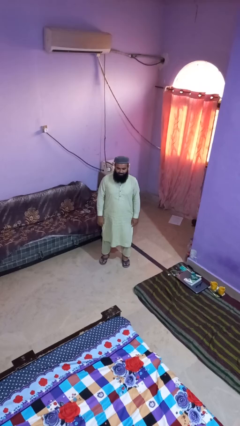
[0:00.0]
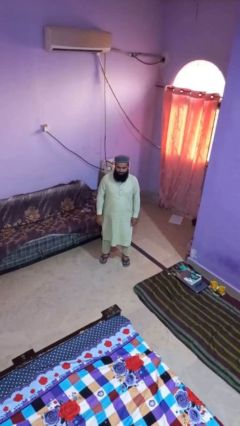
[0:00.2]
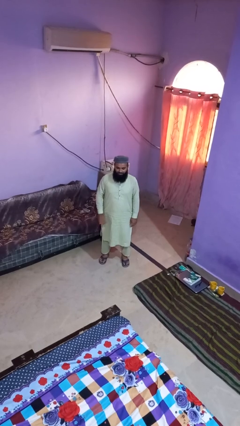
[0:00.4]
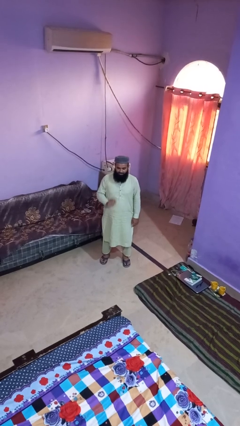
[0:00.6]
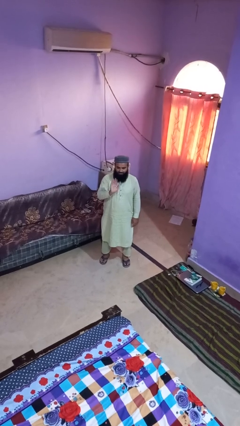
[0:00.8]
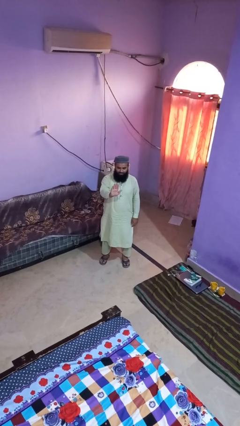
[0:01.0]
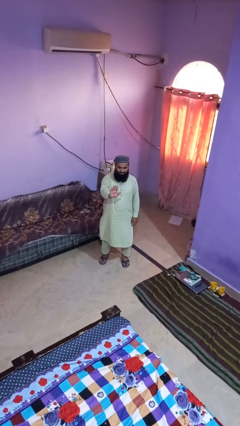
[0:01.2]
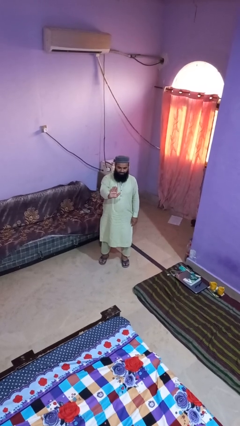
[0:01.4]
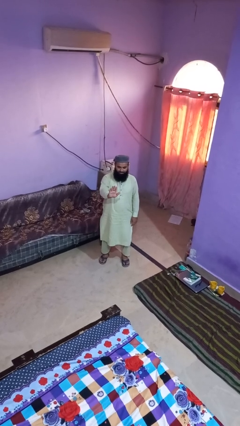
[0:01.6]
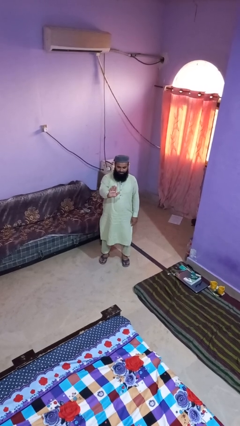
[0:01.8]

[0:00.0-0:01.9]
person gestures stop

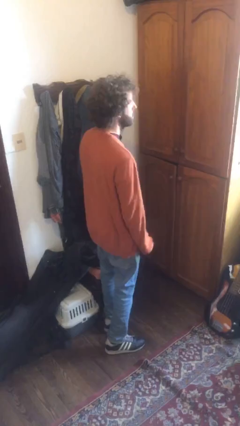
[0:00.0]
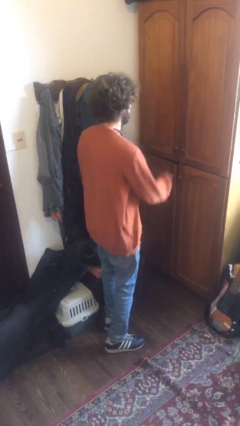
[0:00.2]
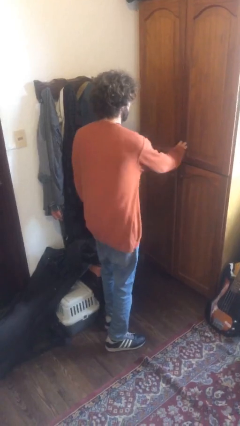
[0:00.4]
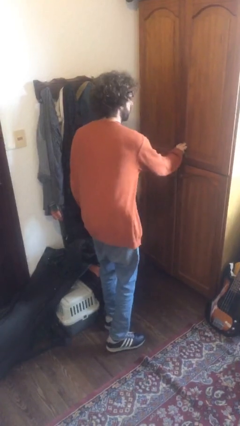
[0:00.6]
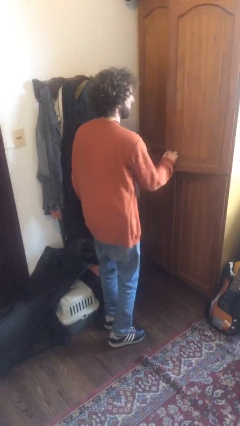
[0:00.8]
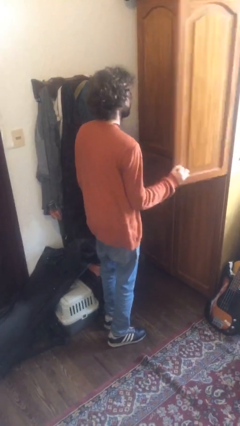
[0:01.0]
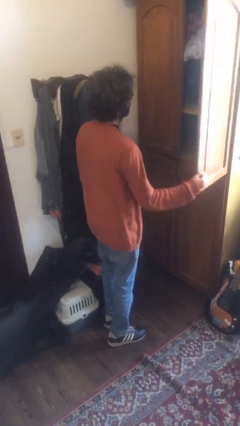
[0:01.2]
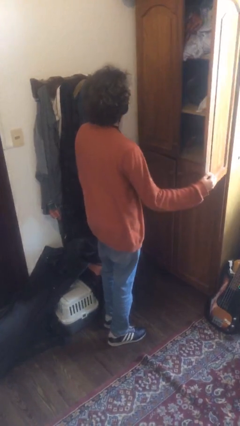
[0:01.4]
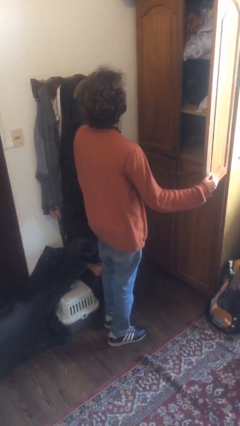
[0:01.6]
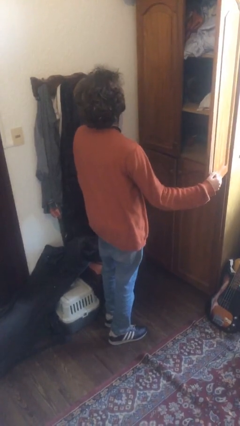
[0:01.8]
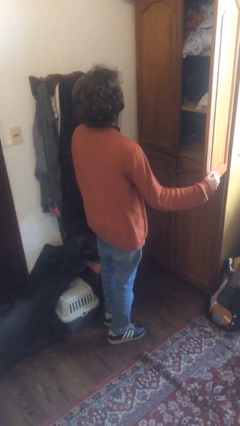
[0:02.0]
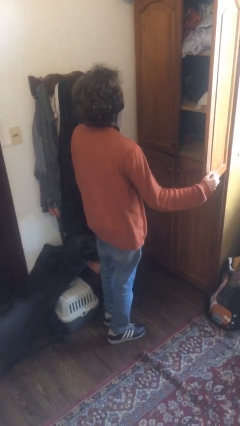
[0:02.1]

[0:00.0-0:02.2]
person opens dresser drawer

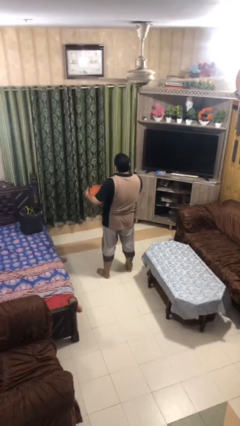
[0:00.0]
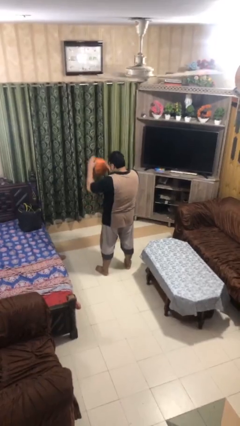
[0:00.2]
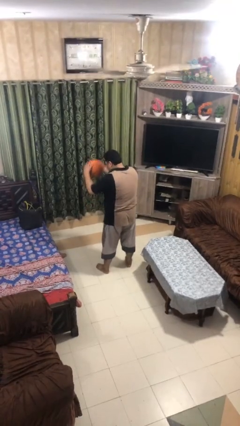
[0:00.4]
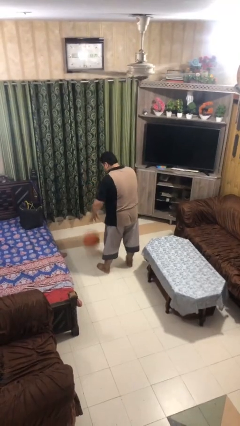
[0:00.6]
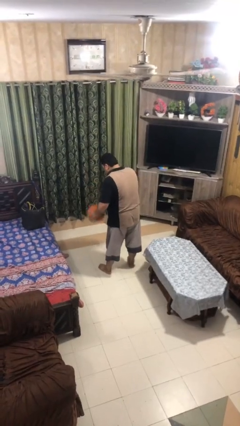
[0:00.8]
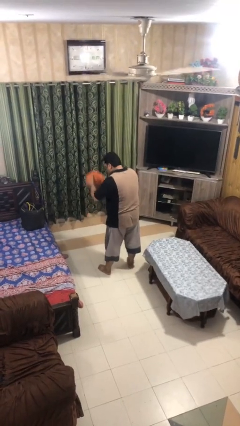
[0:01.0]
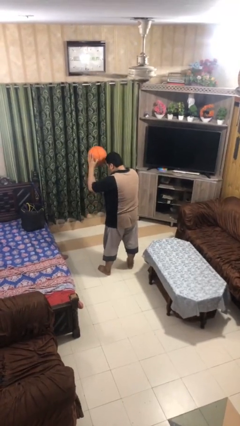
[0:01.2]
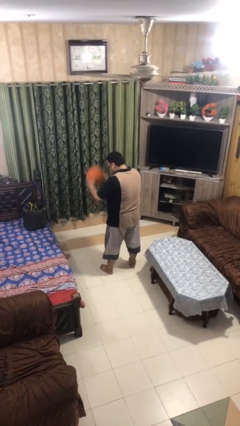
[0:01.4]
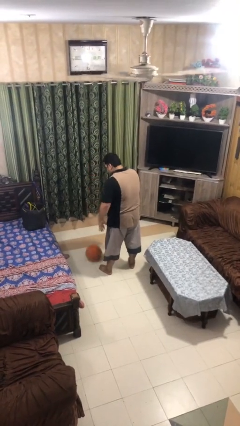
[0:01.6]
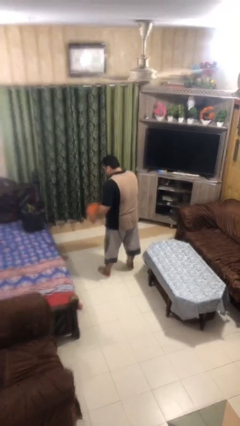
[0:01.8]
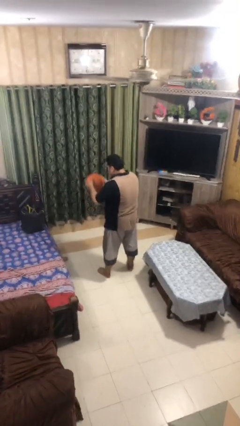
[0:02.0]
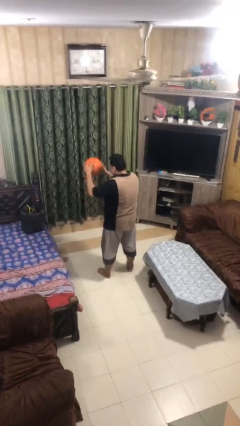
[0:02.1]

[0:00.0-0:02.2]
person bounces ball on floor

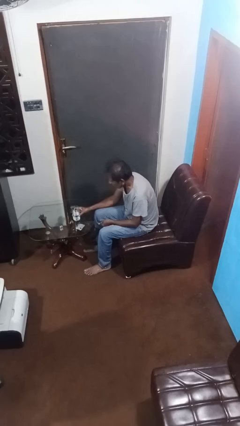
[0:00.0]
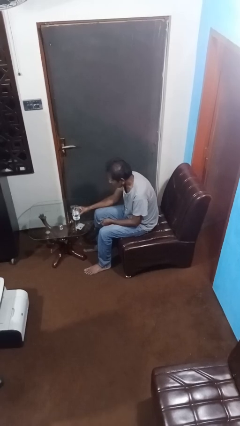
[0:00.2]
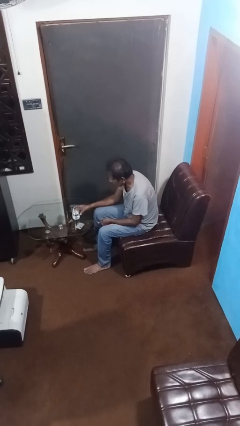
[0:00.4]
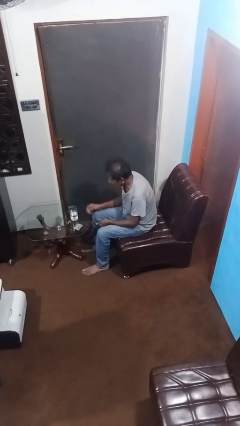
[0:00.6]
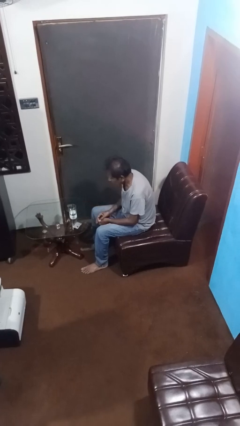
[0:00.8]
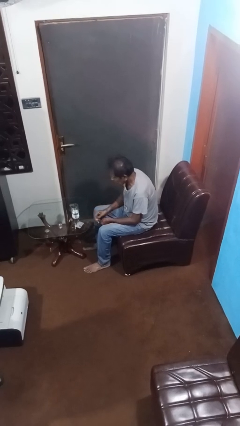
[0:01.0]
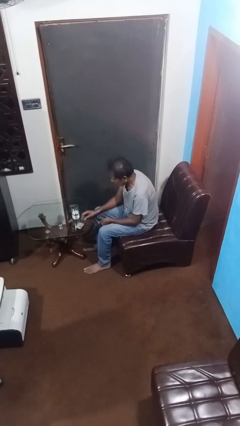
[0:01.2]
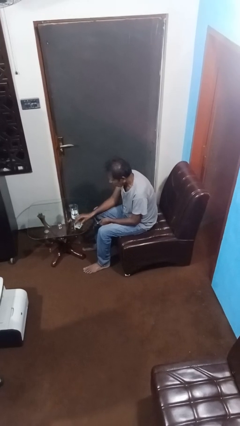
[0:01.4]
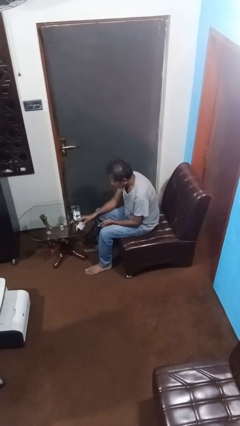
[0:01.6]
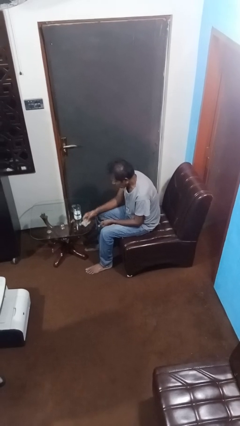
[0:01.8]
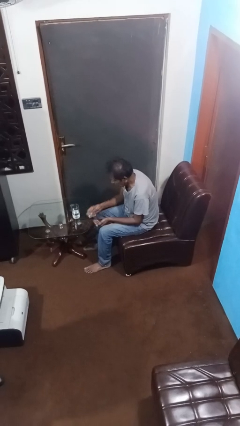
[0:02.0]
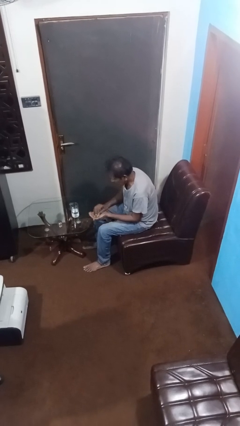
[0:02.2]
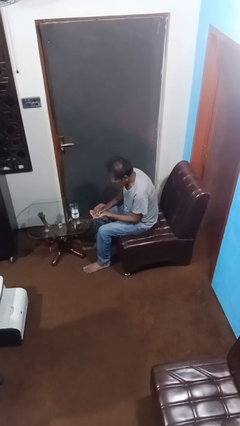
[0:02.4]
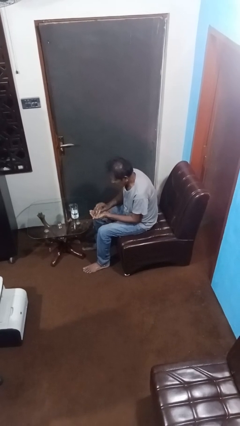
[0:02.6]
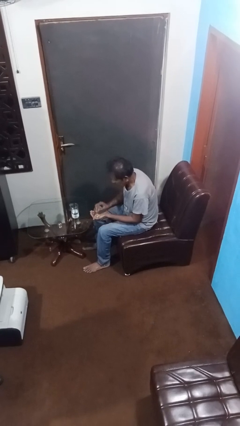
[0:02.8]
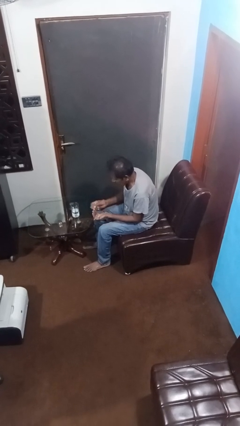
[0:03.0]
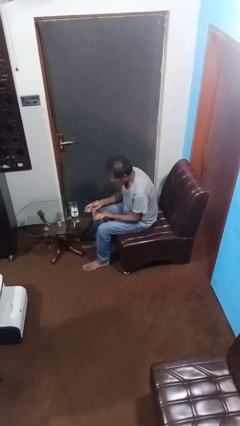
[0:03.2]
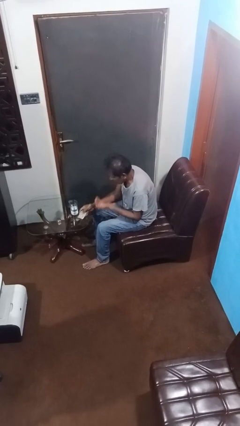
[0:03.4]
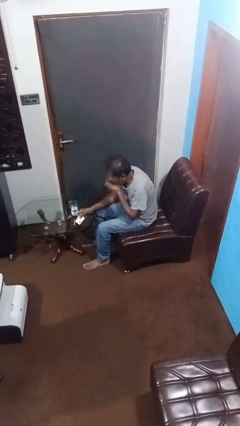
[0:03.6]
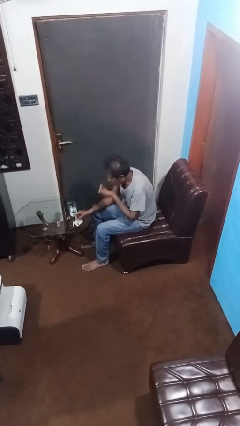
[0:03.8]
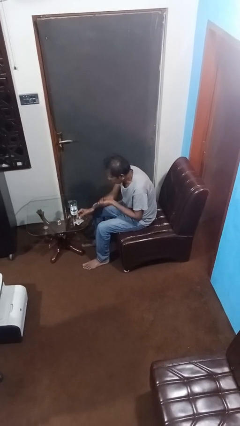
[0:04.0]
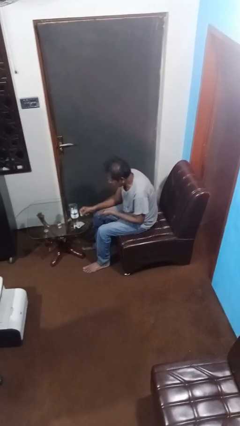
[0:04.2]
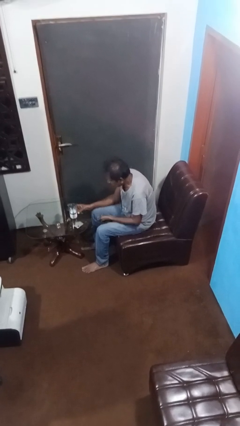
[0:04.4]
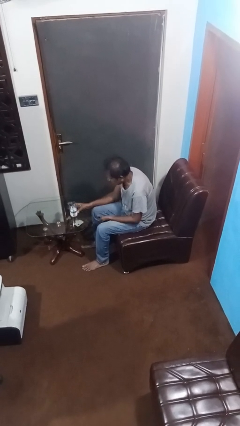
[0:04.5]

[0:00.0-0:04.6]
person takes medicine pills

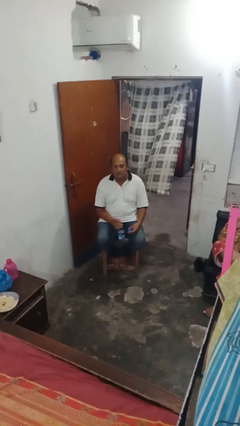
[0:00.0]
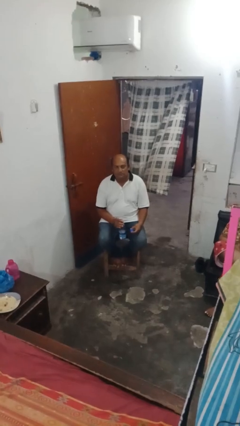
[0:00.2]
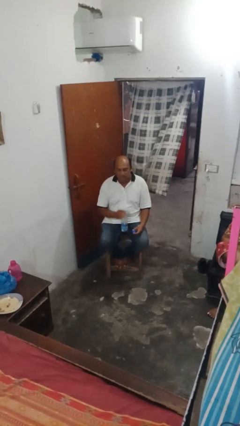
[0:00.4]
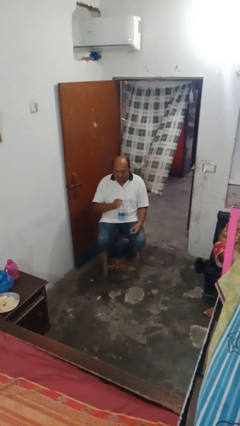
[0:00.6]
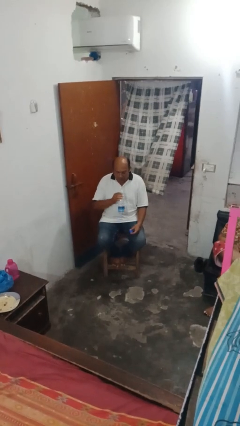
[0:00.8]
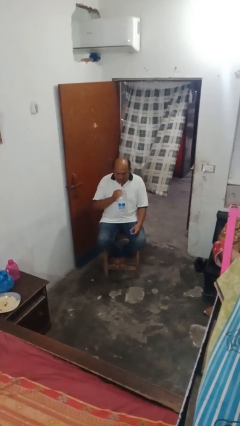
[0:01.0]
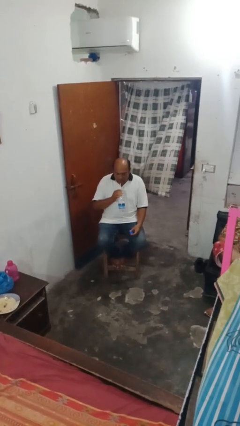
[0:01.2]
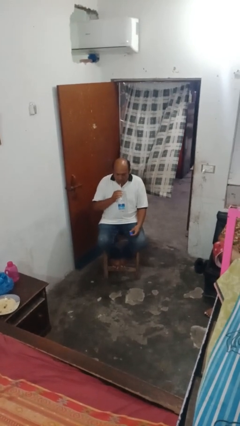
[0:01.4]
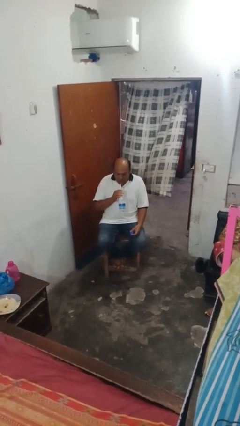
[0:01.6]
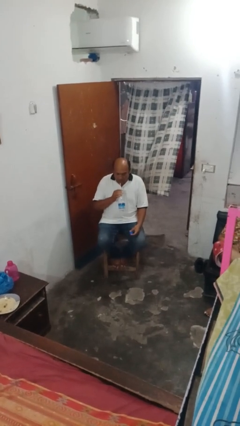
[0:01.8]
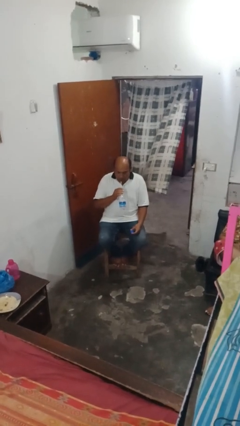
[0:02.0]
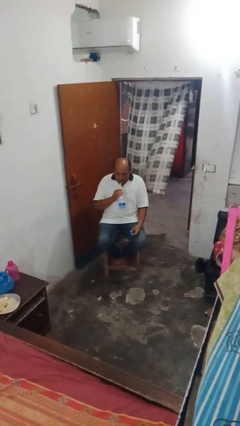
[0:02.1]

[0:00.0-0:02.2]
person drinks from straw

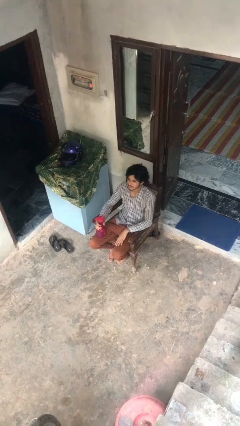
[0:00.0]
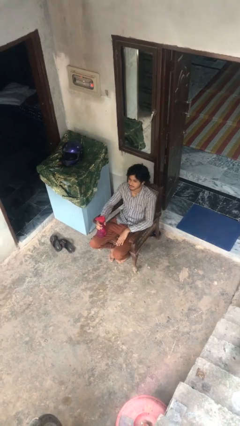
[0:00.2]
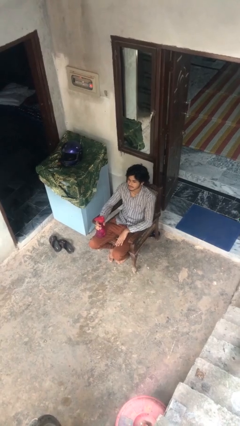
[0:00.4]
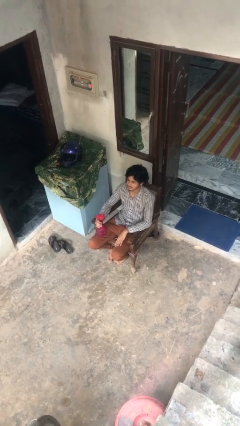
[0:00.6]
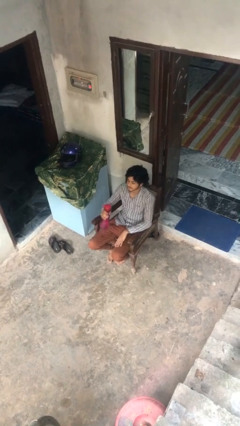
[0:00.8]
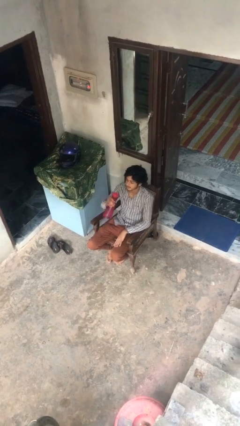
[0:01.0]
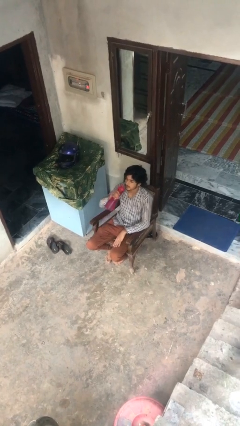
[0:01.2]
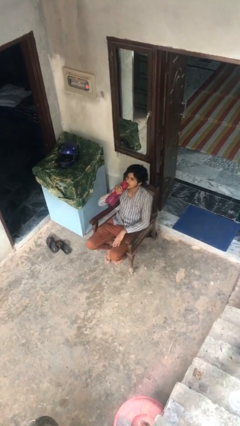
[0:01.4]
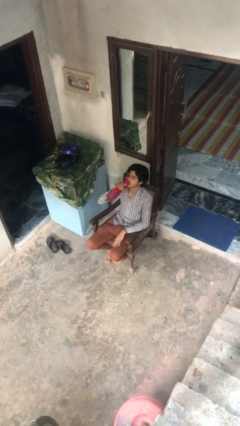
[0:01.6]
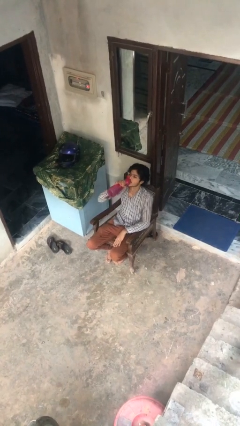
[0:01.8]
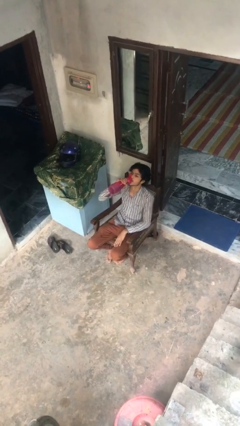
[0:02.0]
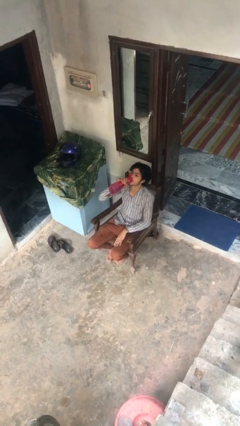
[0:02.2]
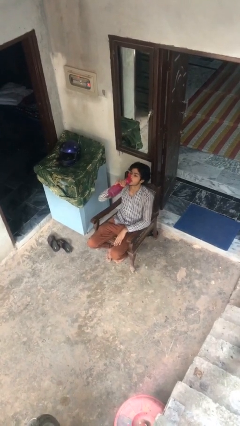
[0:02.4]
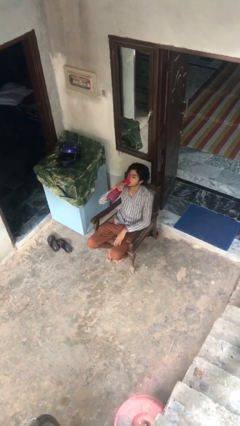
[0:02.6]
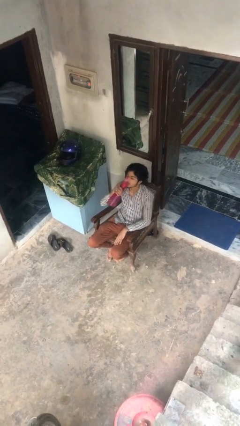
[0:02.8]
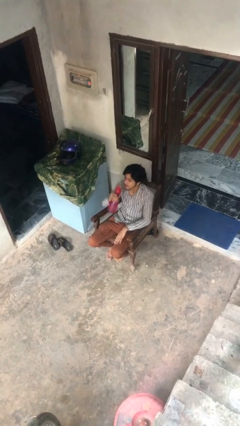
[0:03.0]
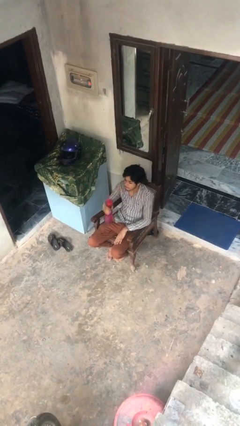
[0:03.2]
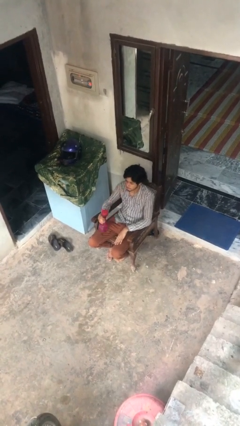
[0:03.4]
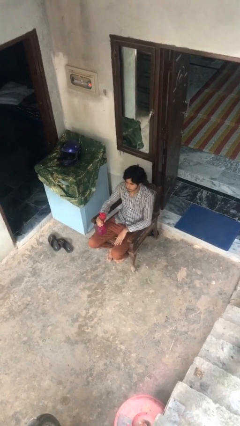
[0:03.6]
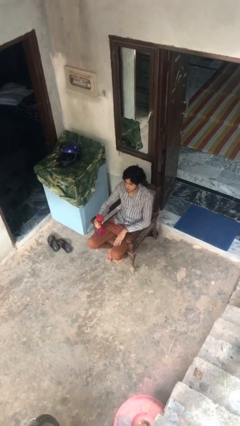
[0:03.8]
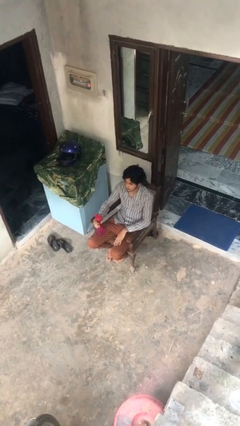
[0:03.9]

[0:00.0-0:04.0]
person drinks from bottle

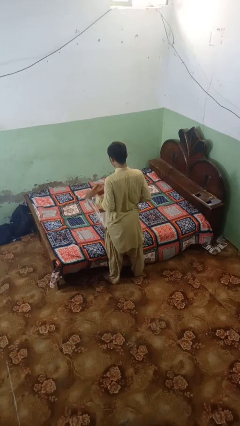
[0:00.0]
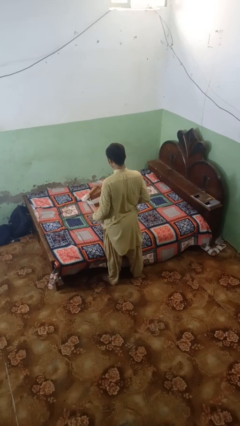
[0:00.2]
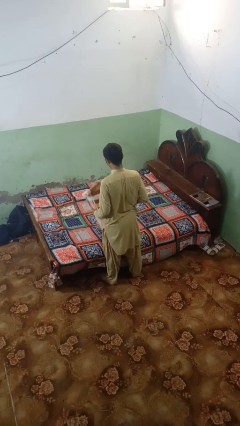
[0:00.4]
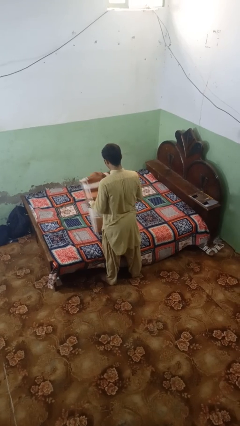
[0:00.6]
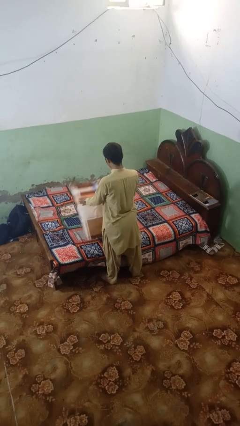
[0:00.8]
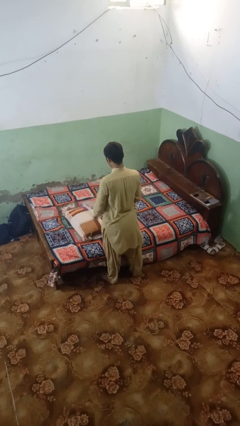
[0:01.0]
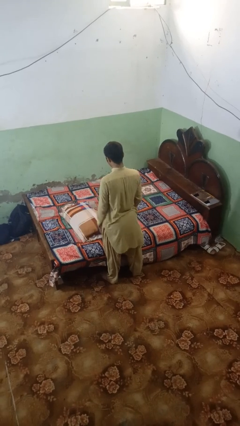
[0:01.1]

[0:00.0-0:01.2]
person throws object on bed
